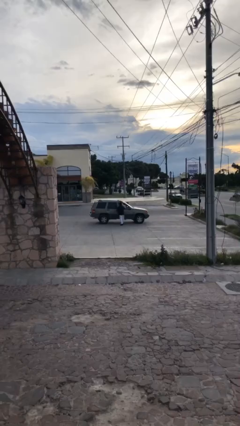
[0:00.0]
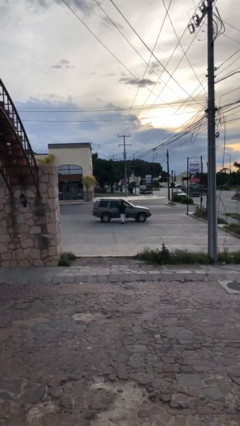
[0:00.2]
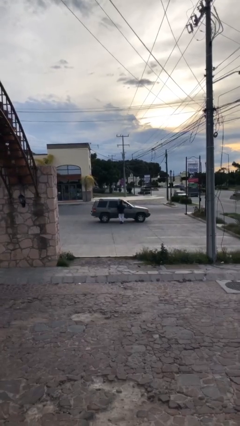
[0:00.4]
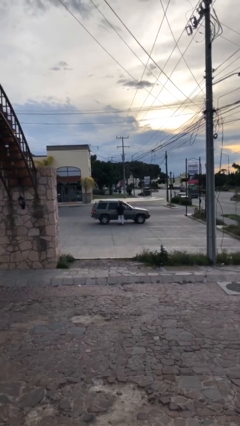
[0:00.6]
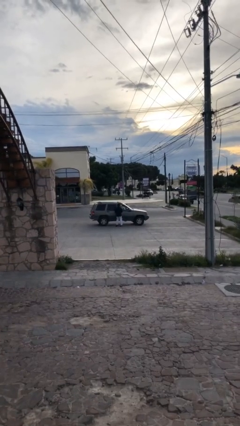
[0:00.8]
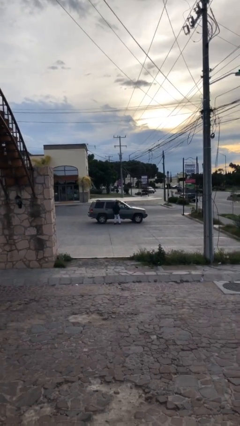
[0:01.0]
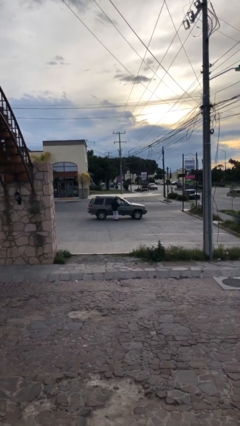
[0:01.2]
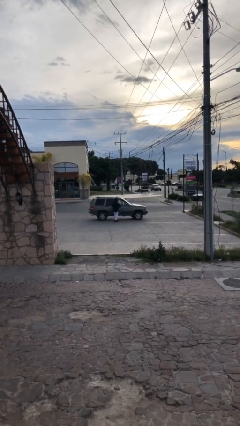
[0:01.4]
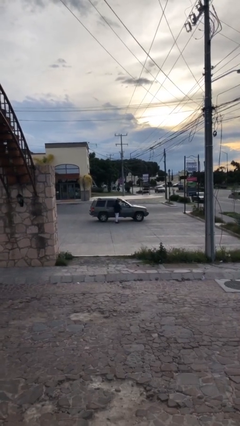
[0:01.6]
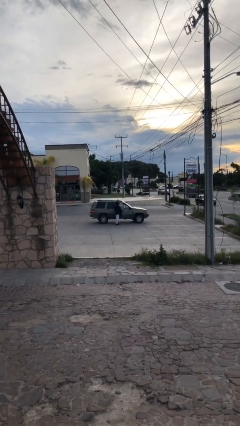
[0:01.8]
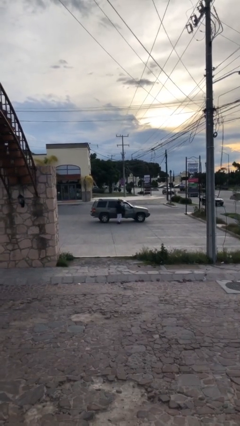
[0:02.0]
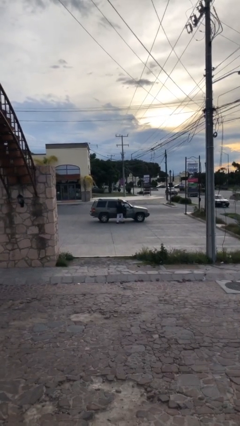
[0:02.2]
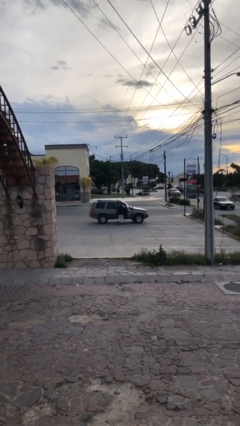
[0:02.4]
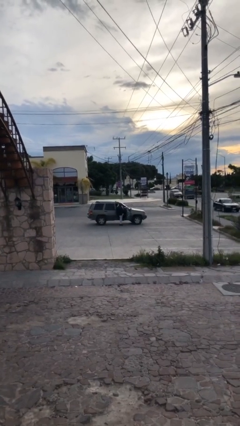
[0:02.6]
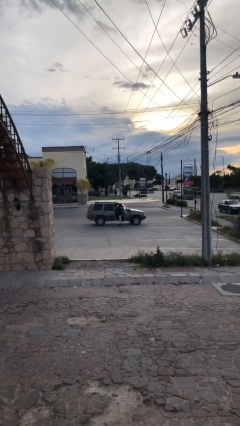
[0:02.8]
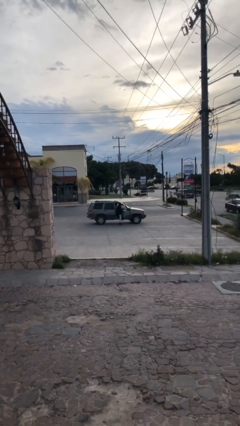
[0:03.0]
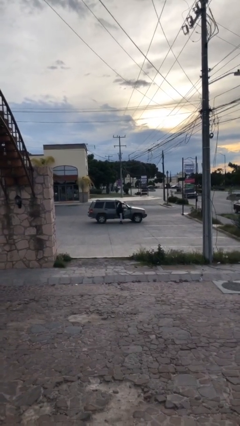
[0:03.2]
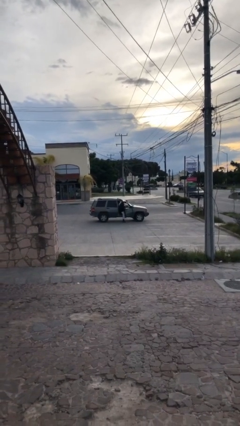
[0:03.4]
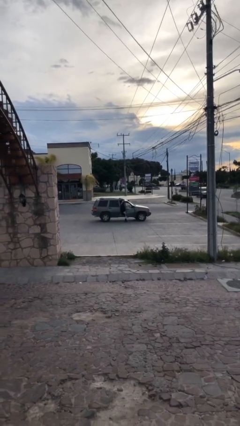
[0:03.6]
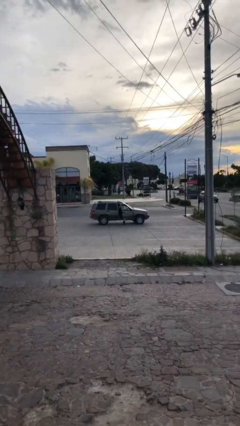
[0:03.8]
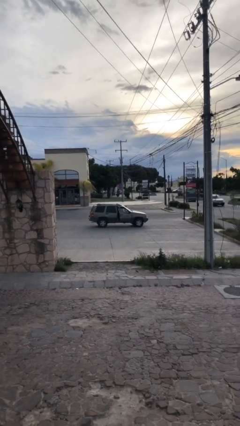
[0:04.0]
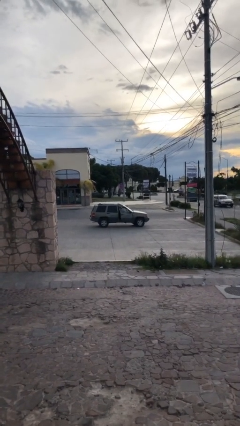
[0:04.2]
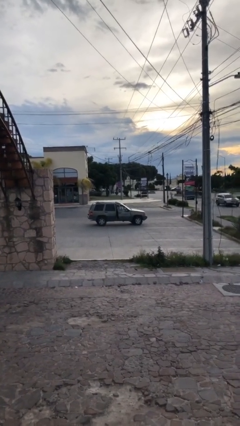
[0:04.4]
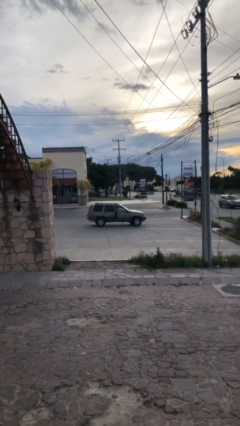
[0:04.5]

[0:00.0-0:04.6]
car picks up person

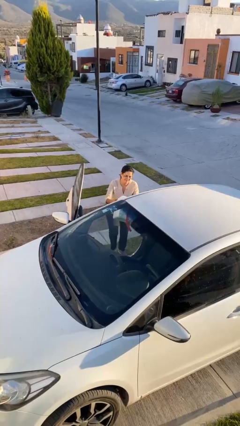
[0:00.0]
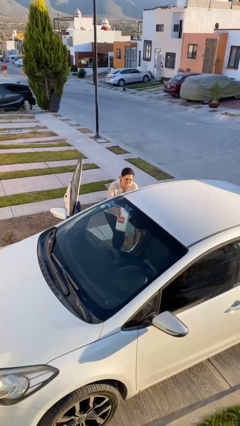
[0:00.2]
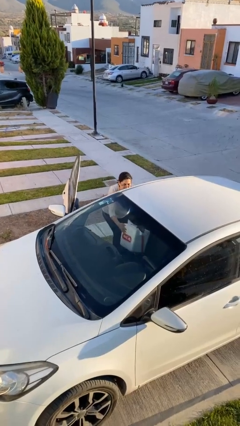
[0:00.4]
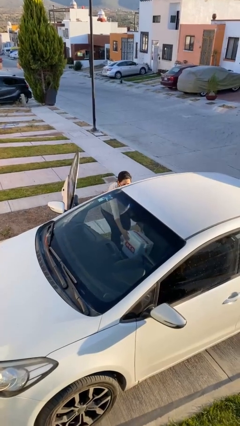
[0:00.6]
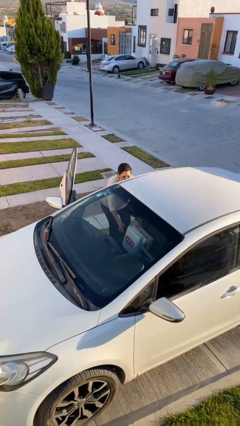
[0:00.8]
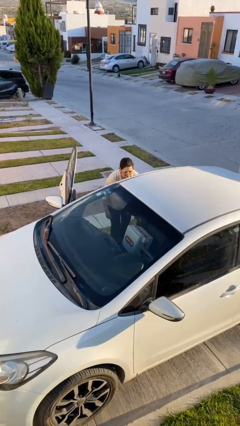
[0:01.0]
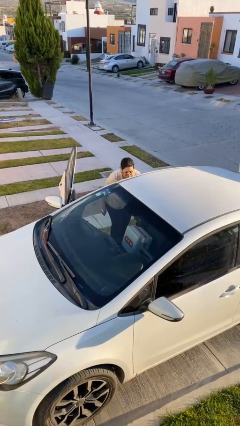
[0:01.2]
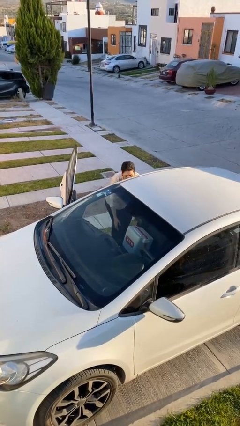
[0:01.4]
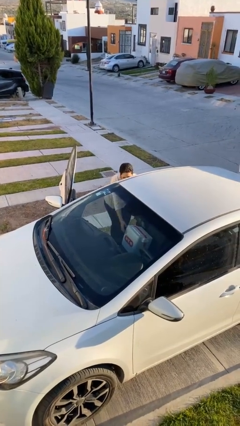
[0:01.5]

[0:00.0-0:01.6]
person loads car

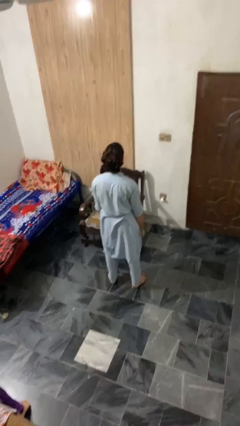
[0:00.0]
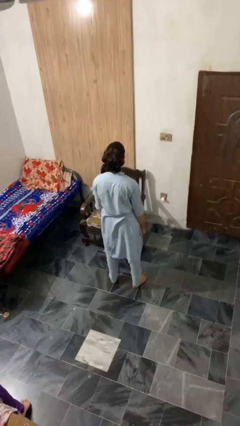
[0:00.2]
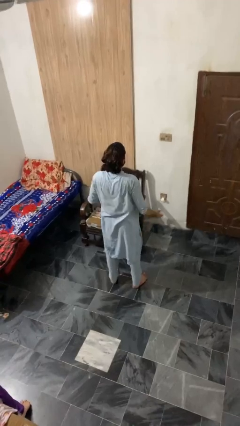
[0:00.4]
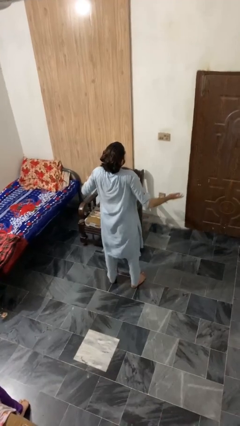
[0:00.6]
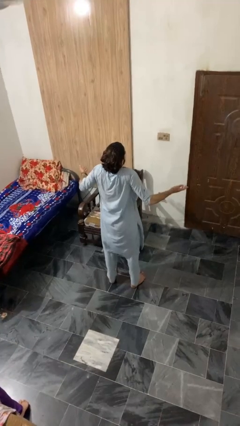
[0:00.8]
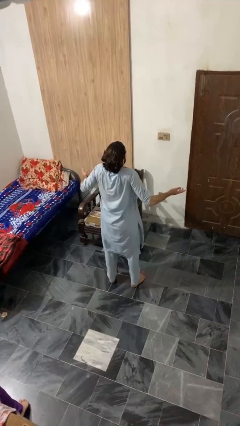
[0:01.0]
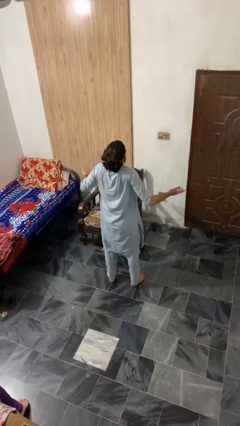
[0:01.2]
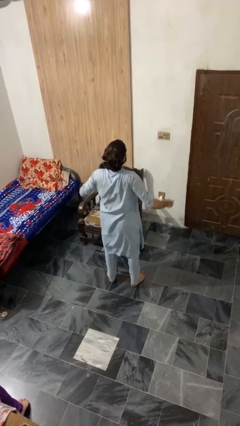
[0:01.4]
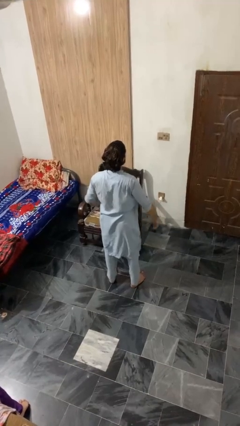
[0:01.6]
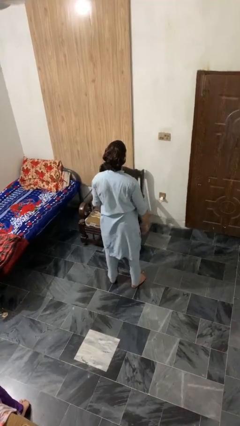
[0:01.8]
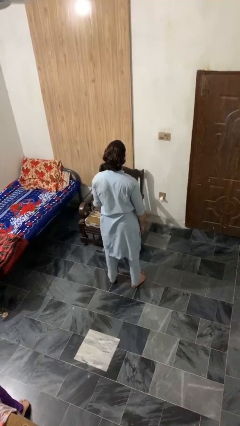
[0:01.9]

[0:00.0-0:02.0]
person shrugs

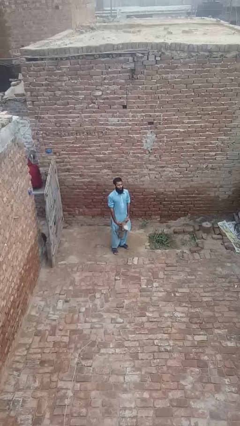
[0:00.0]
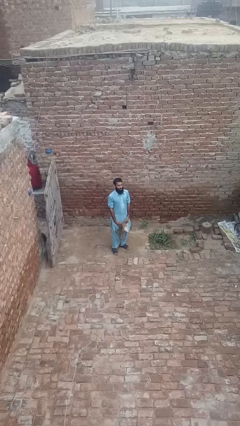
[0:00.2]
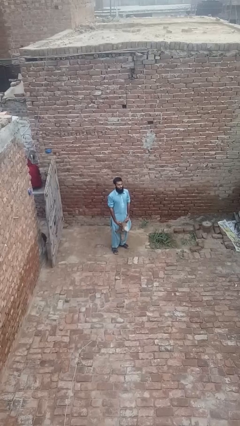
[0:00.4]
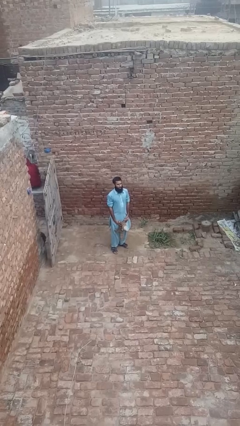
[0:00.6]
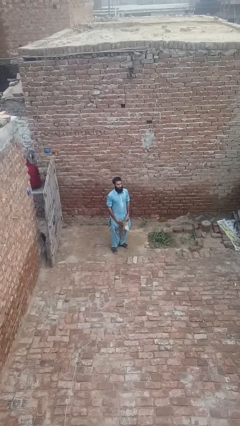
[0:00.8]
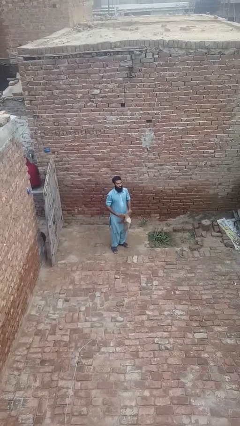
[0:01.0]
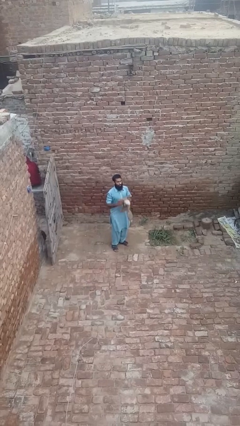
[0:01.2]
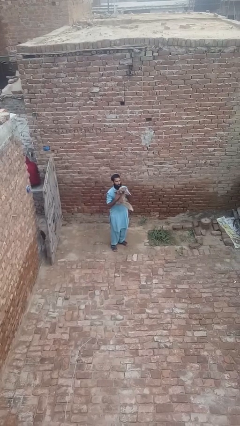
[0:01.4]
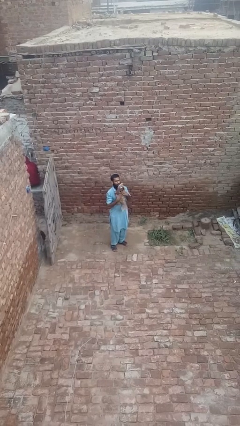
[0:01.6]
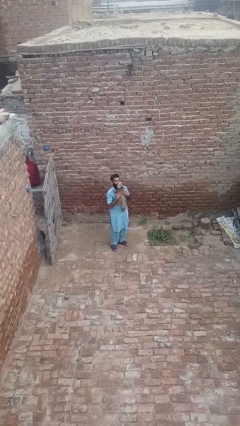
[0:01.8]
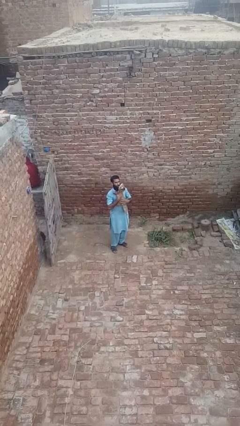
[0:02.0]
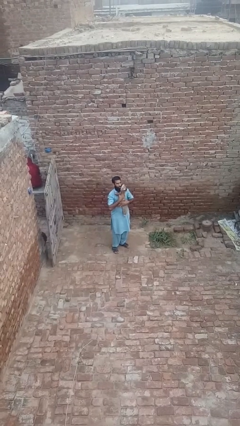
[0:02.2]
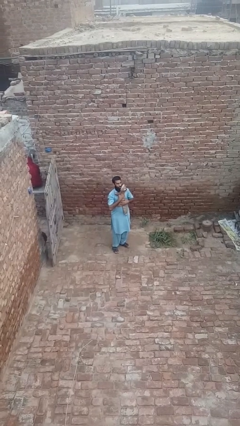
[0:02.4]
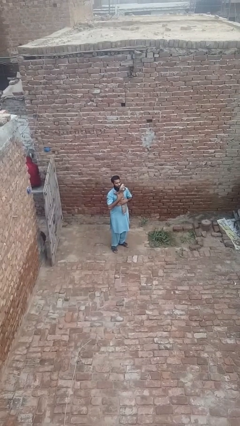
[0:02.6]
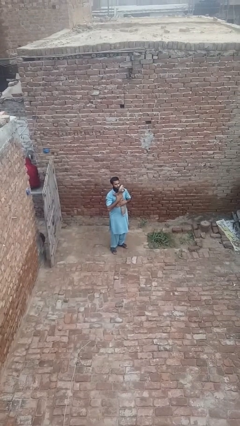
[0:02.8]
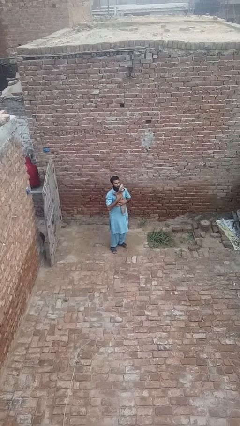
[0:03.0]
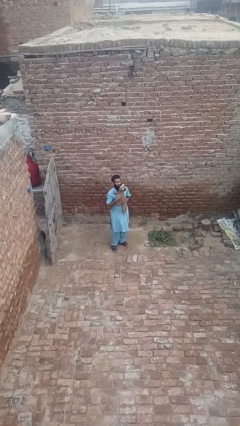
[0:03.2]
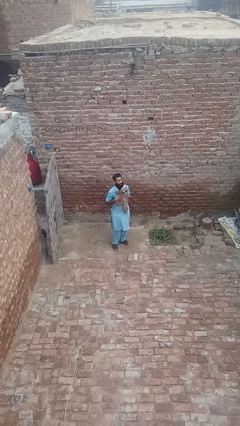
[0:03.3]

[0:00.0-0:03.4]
person hugs stuffed animal

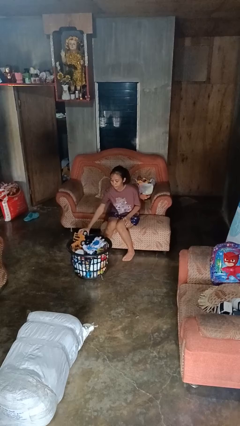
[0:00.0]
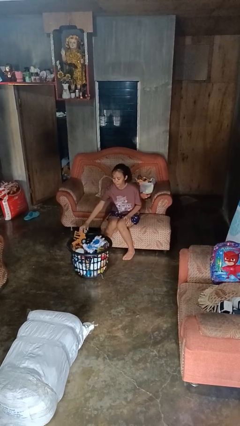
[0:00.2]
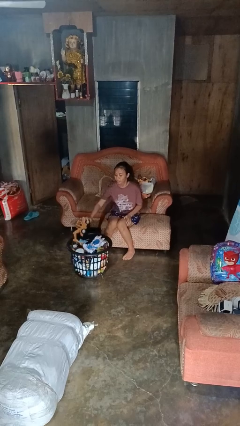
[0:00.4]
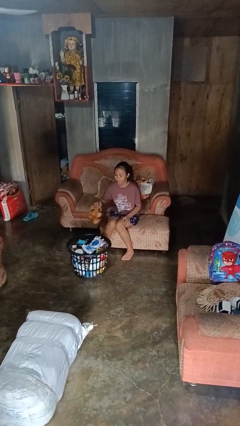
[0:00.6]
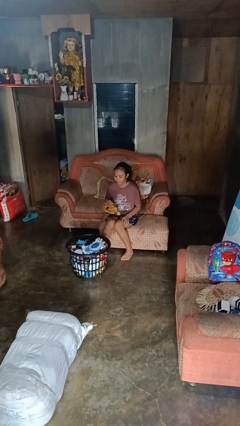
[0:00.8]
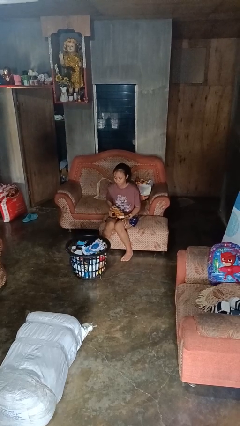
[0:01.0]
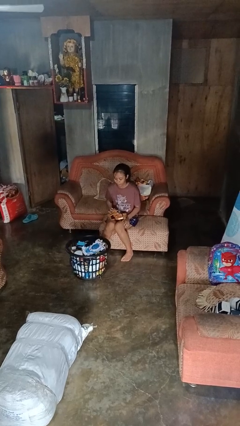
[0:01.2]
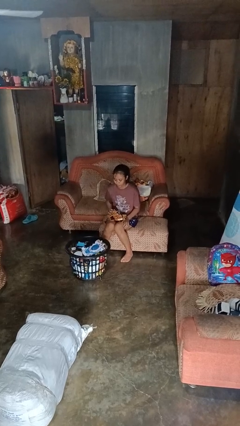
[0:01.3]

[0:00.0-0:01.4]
person takes object from basket

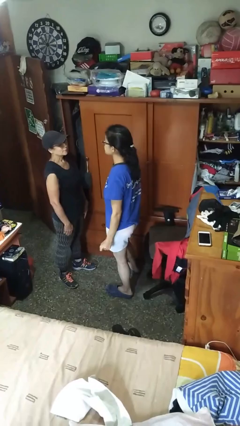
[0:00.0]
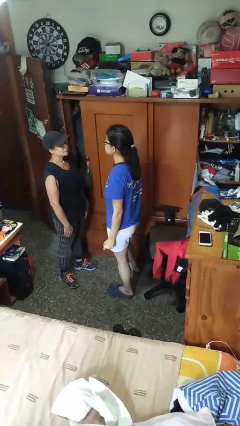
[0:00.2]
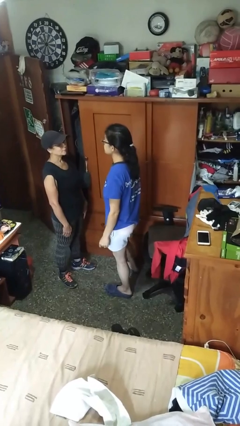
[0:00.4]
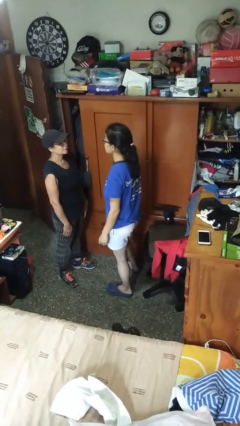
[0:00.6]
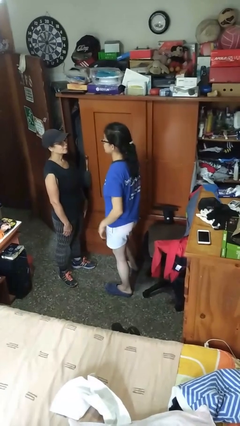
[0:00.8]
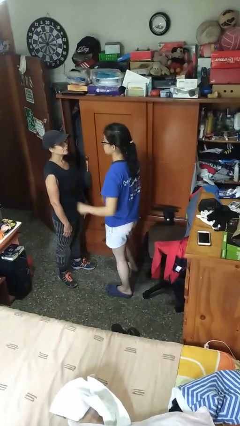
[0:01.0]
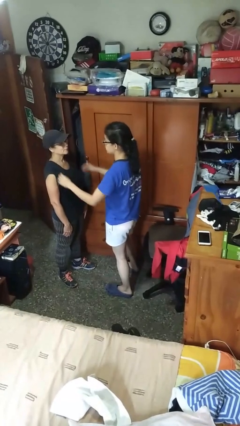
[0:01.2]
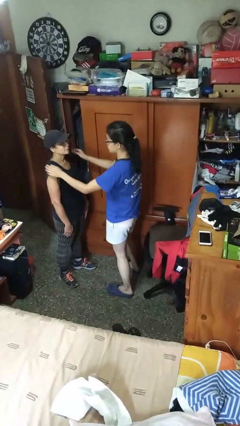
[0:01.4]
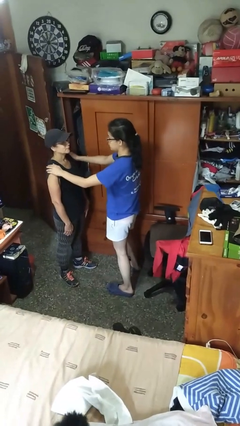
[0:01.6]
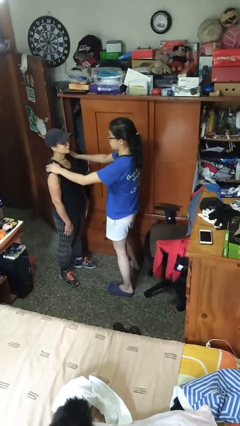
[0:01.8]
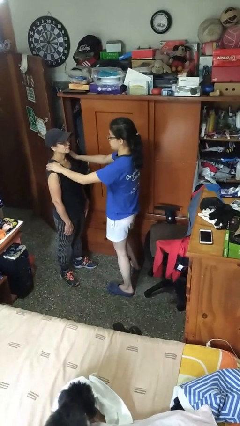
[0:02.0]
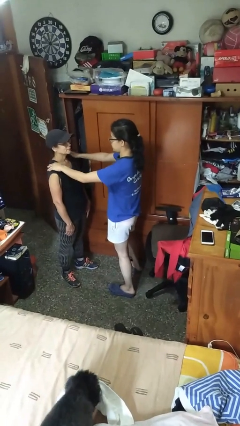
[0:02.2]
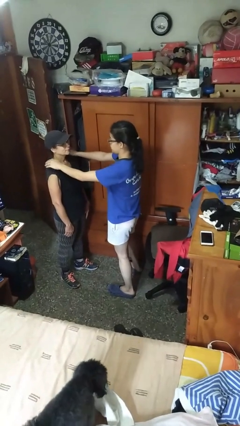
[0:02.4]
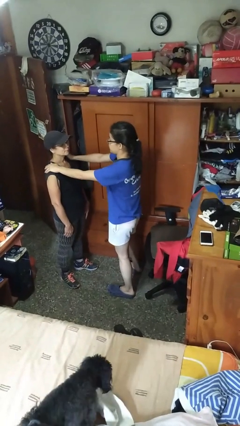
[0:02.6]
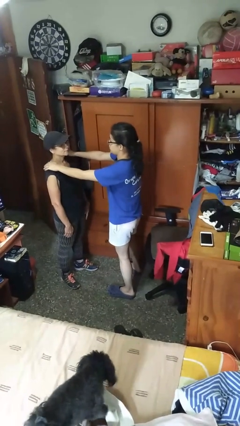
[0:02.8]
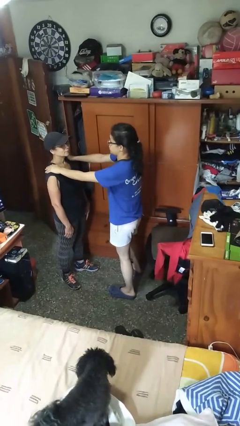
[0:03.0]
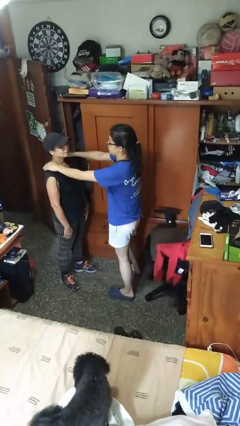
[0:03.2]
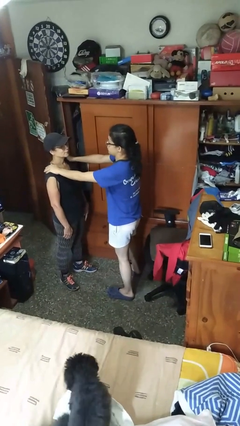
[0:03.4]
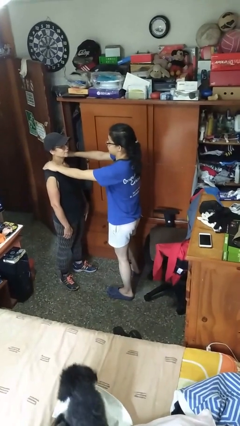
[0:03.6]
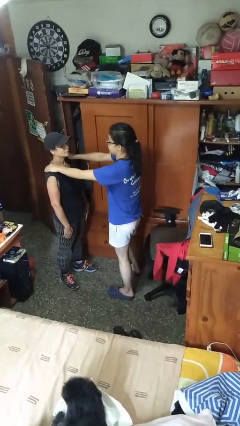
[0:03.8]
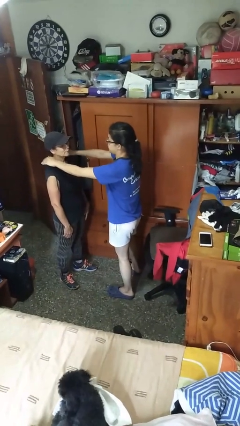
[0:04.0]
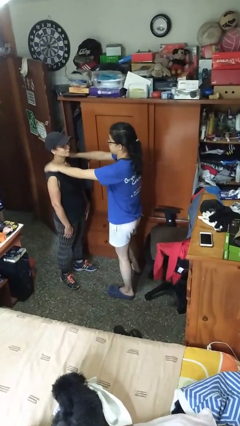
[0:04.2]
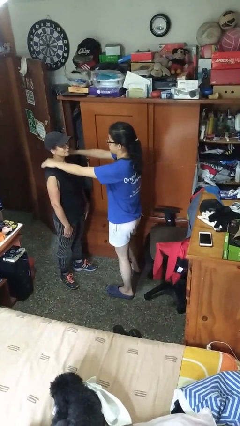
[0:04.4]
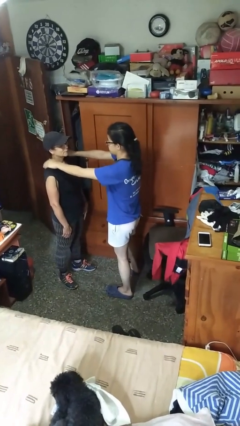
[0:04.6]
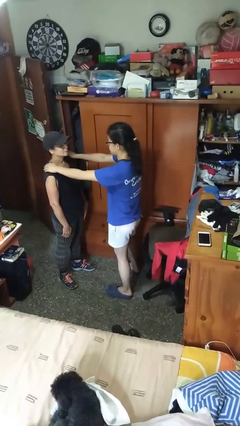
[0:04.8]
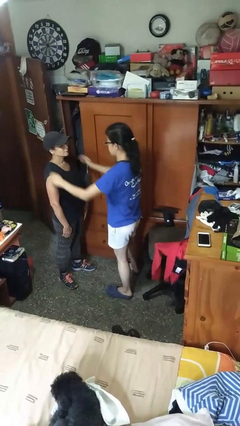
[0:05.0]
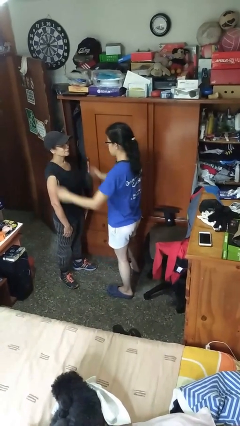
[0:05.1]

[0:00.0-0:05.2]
person pounds shoulders of person
